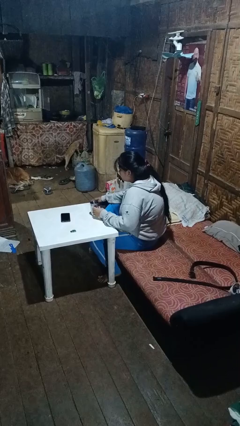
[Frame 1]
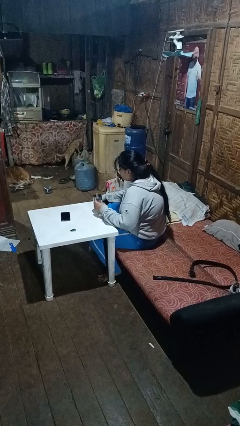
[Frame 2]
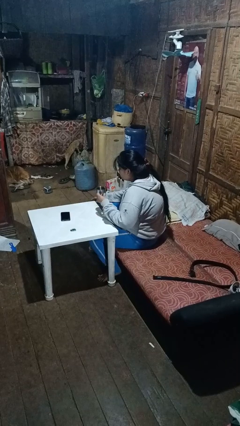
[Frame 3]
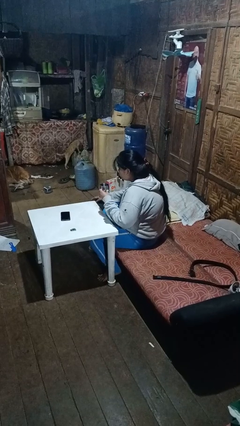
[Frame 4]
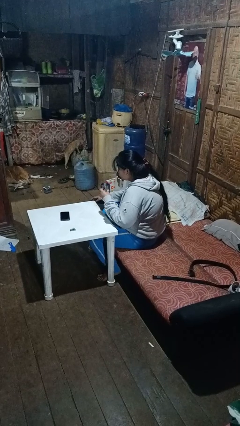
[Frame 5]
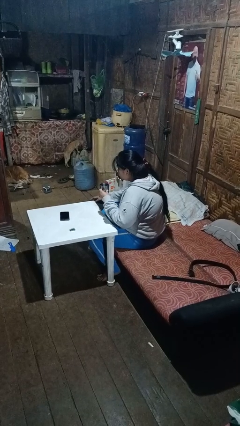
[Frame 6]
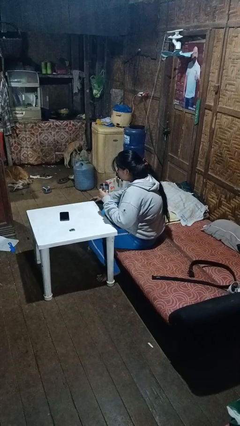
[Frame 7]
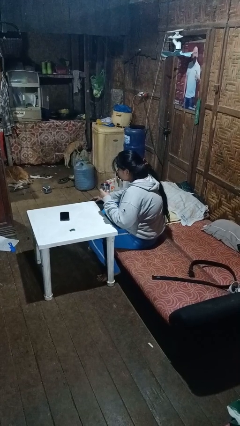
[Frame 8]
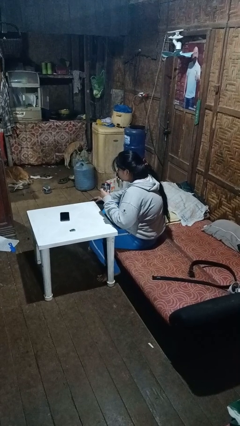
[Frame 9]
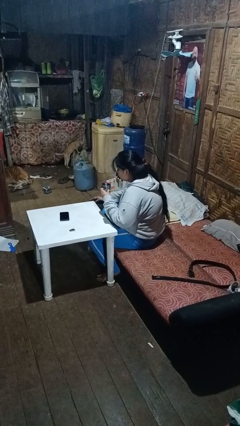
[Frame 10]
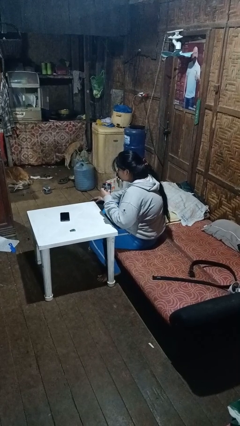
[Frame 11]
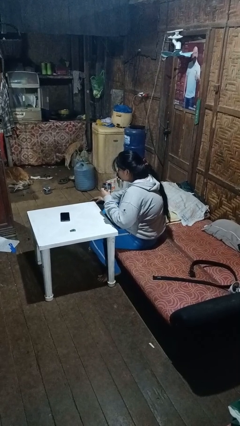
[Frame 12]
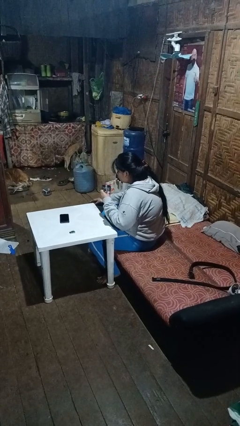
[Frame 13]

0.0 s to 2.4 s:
person picks up object from table

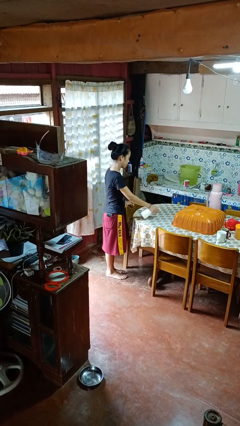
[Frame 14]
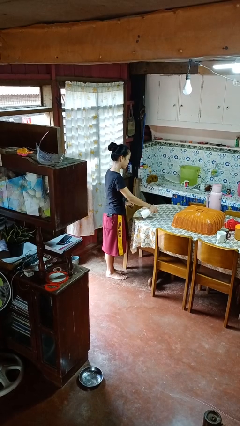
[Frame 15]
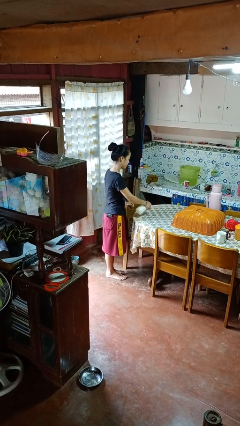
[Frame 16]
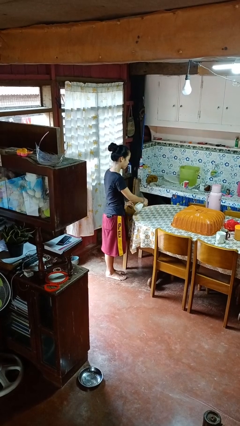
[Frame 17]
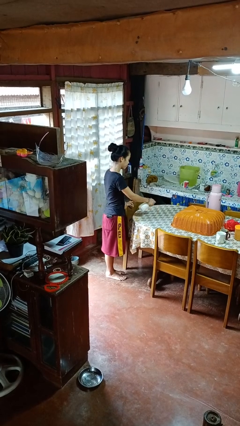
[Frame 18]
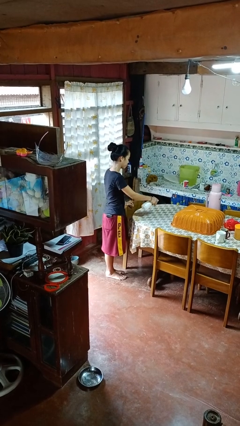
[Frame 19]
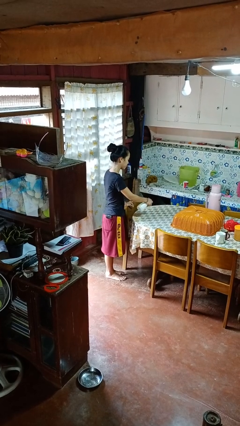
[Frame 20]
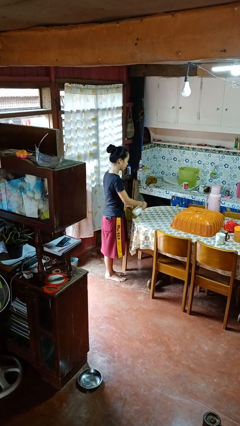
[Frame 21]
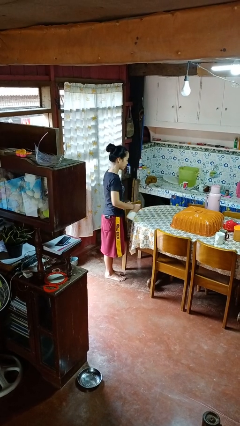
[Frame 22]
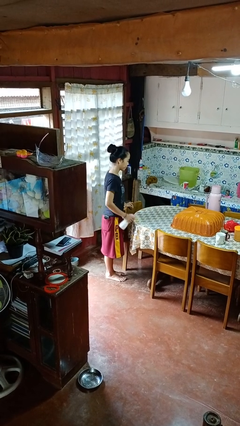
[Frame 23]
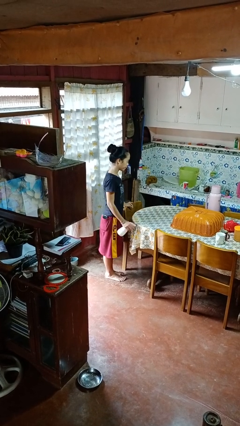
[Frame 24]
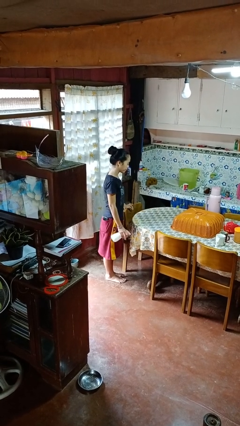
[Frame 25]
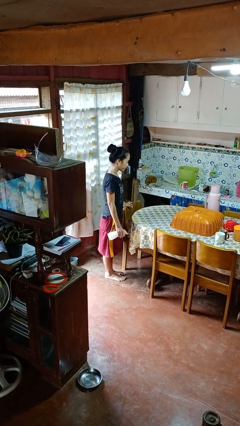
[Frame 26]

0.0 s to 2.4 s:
person sprays from bottle

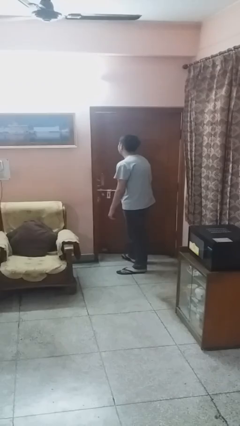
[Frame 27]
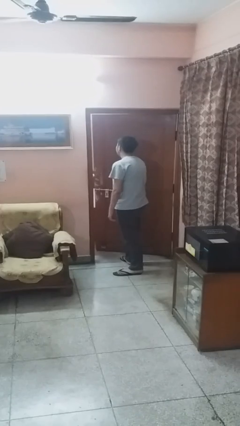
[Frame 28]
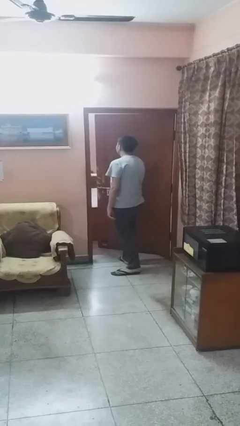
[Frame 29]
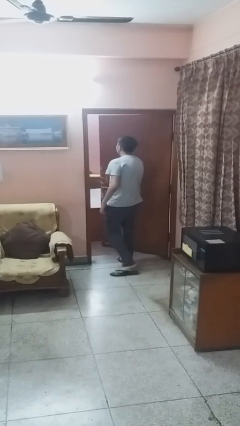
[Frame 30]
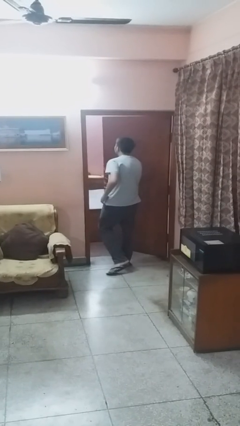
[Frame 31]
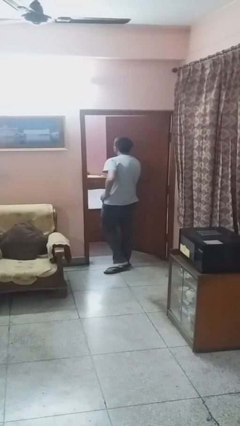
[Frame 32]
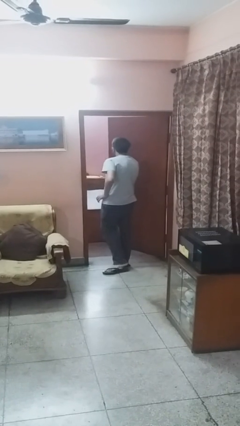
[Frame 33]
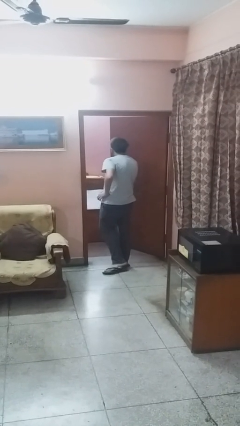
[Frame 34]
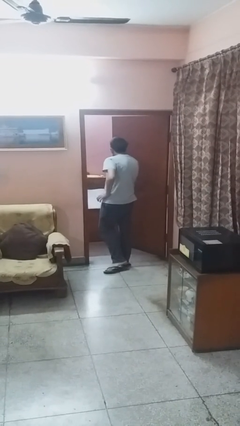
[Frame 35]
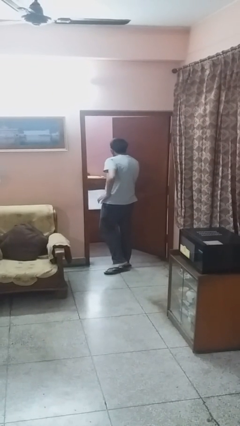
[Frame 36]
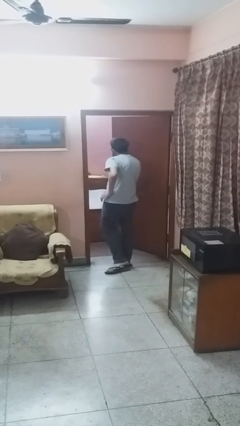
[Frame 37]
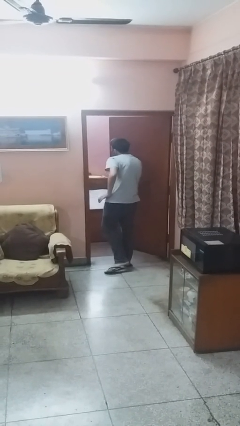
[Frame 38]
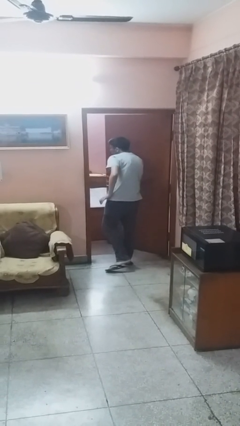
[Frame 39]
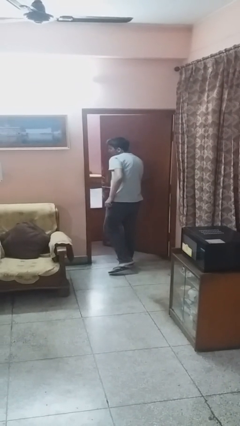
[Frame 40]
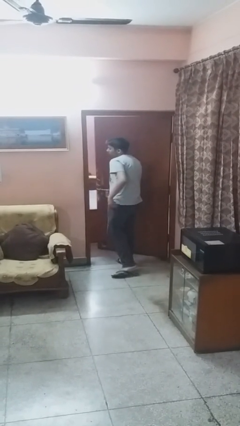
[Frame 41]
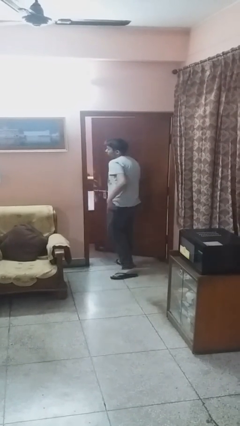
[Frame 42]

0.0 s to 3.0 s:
person opens facility door

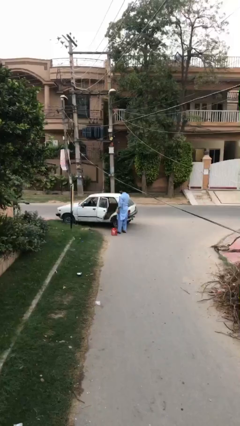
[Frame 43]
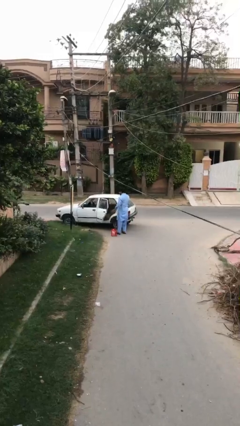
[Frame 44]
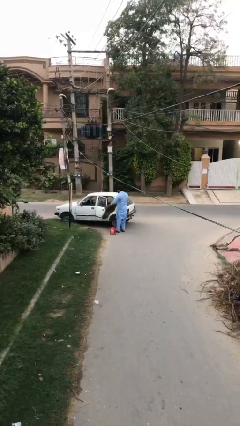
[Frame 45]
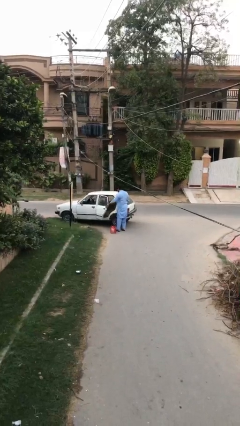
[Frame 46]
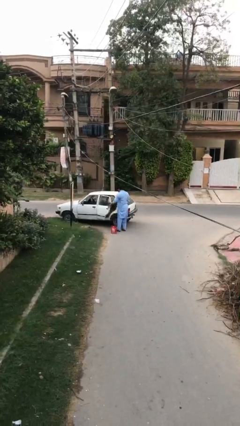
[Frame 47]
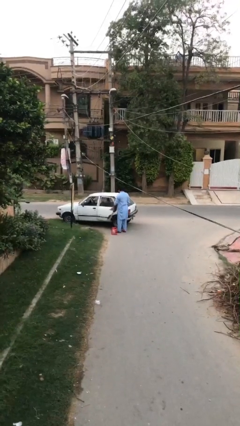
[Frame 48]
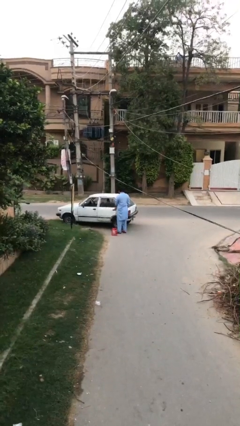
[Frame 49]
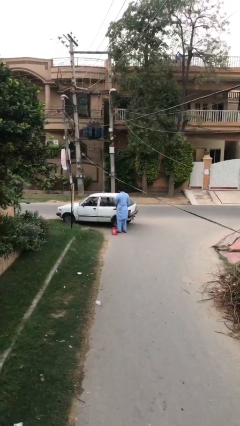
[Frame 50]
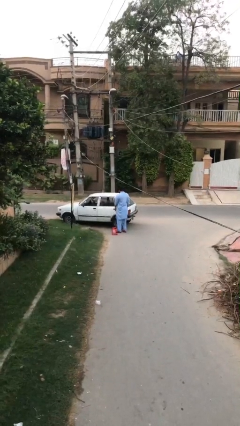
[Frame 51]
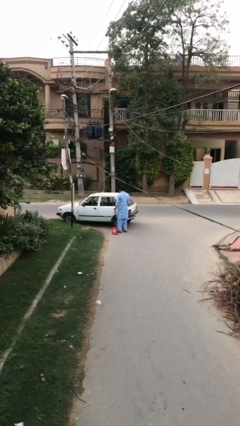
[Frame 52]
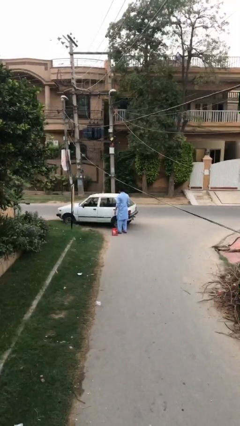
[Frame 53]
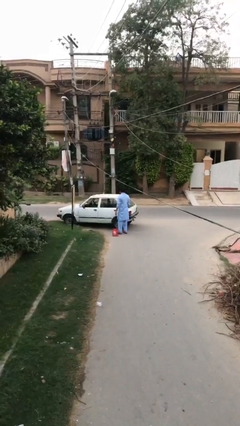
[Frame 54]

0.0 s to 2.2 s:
person closes car door

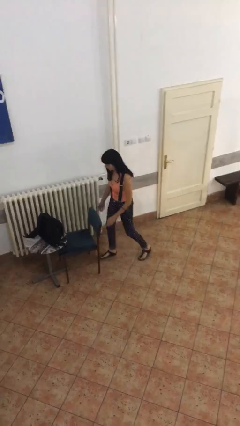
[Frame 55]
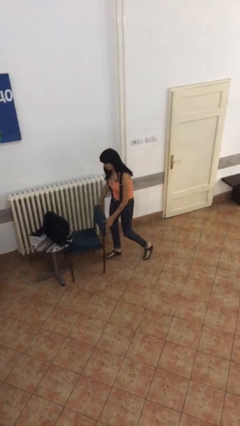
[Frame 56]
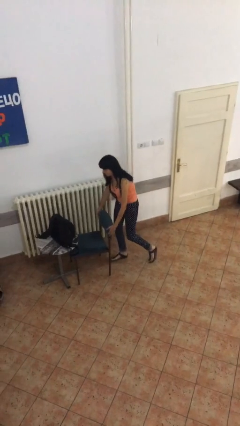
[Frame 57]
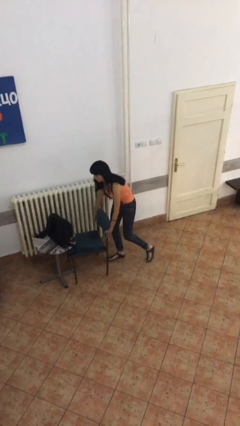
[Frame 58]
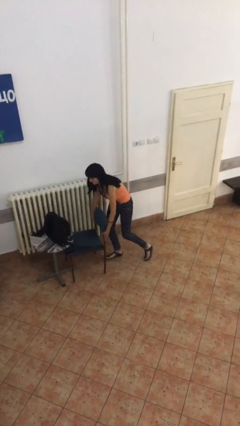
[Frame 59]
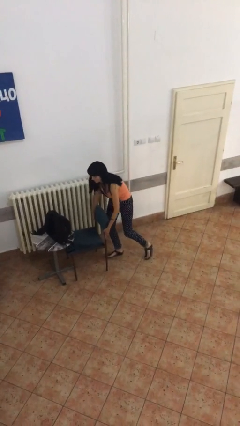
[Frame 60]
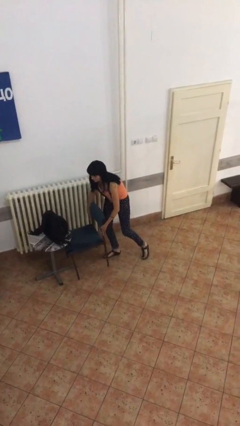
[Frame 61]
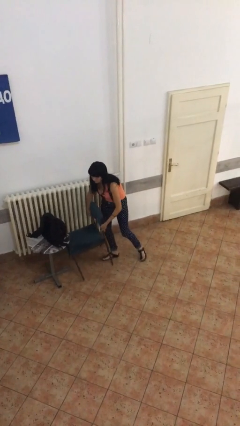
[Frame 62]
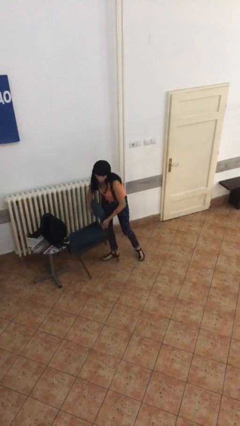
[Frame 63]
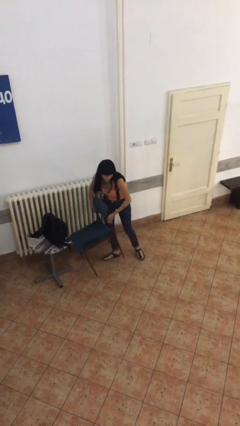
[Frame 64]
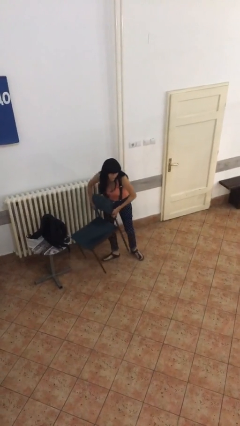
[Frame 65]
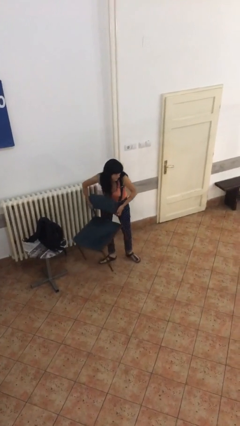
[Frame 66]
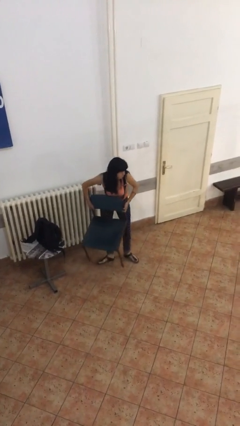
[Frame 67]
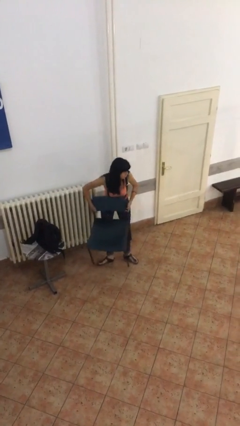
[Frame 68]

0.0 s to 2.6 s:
person picks up object from floor

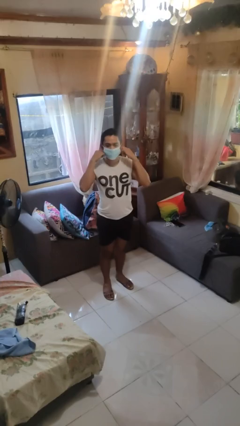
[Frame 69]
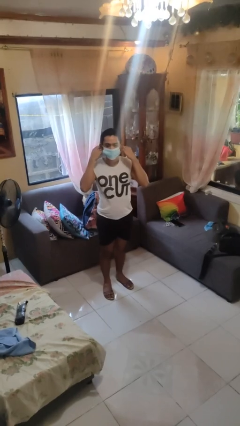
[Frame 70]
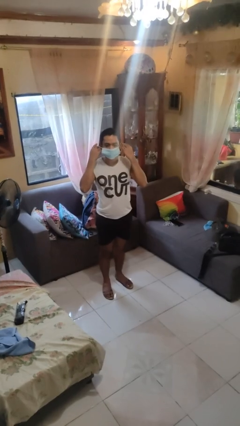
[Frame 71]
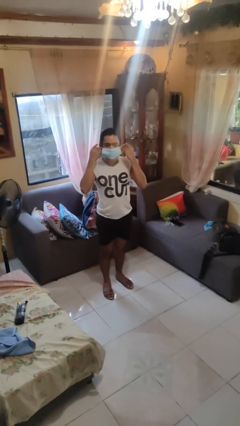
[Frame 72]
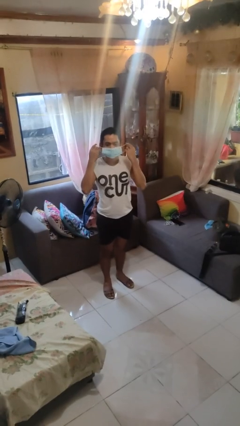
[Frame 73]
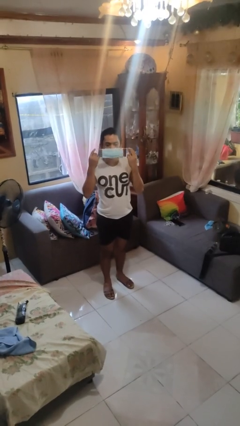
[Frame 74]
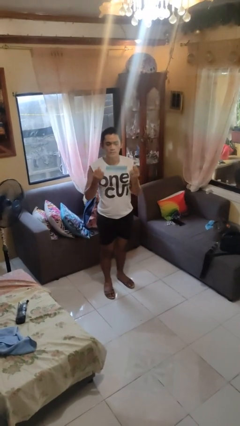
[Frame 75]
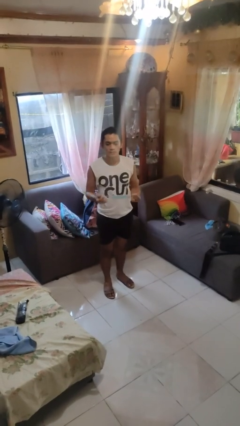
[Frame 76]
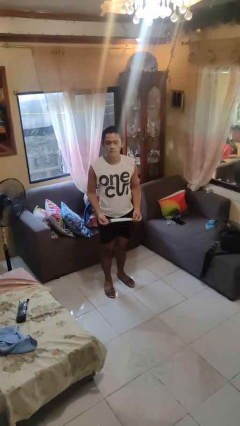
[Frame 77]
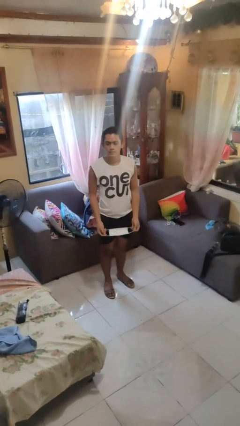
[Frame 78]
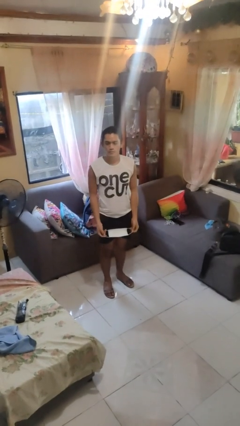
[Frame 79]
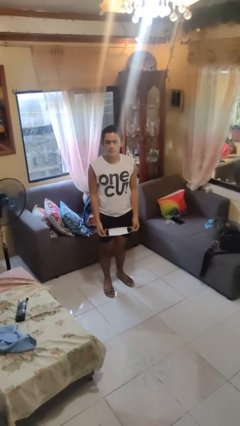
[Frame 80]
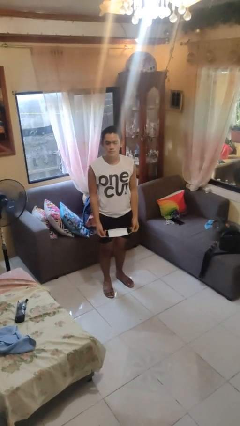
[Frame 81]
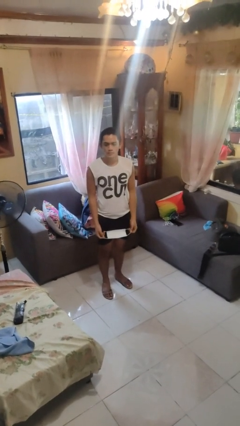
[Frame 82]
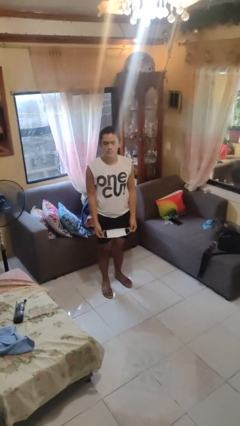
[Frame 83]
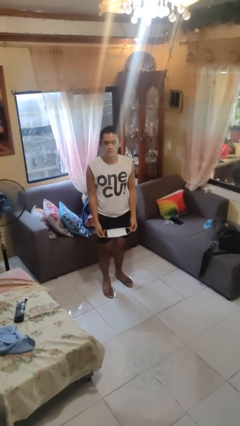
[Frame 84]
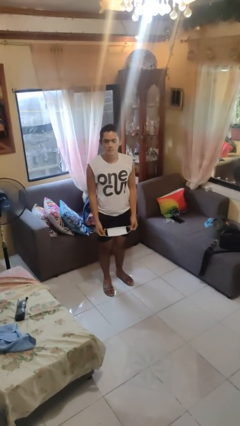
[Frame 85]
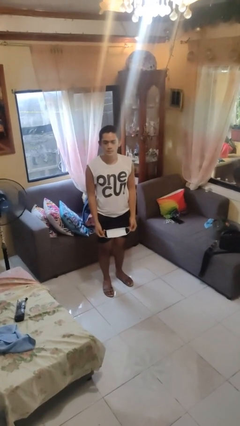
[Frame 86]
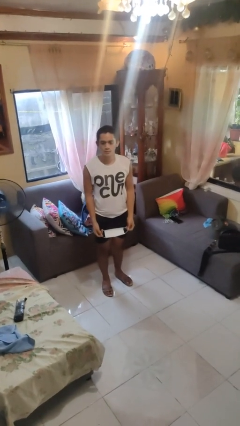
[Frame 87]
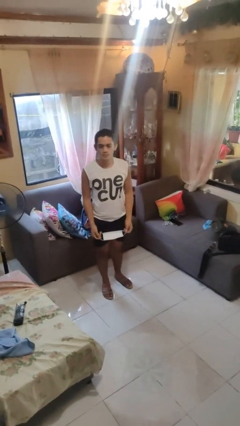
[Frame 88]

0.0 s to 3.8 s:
person takes off facemask

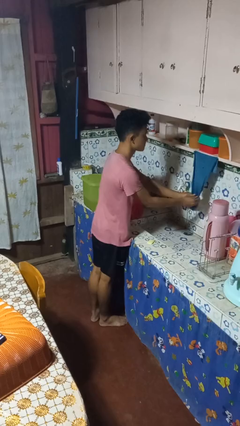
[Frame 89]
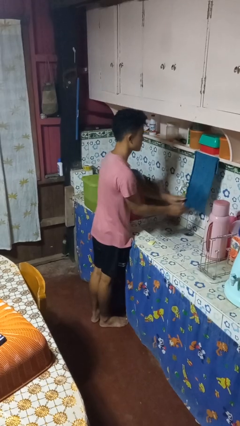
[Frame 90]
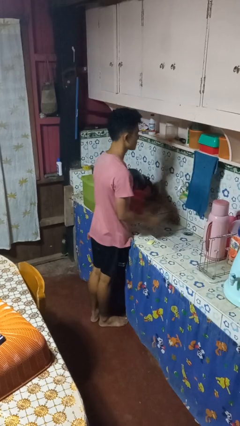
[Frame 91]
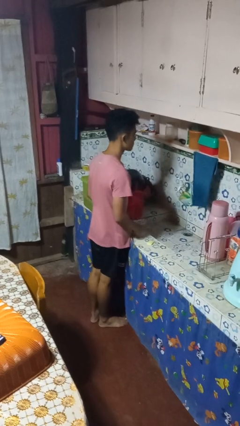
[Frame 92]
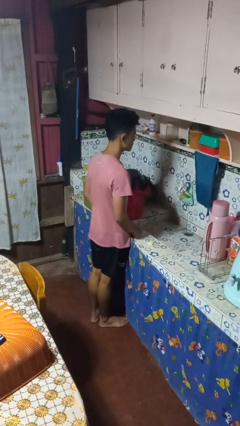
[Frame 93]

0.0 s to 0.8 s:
person dries hands with towel
